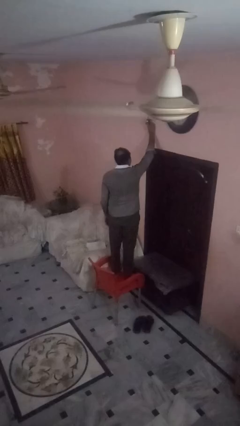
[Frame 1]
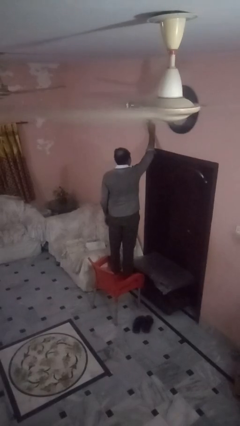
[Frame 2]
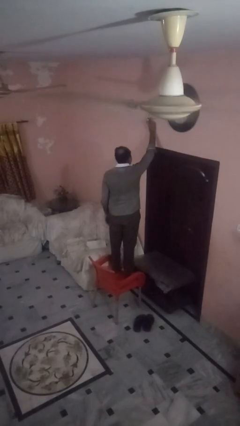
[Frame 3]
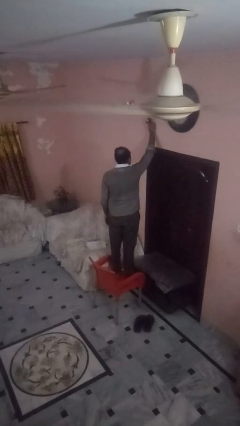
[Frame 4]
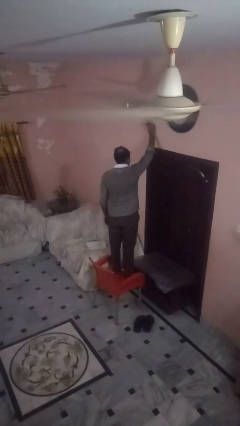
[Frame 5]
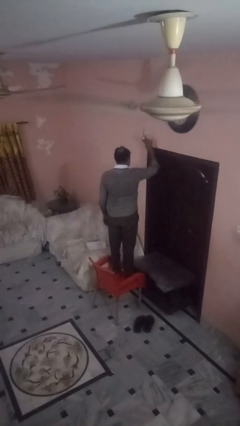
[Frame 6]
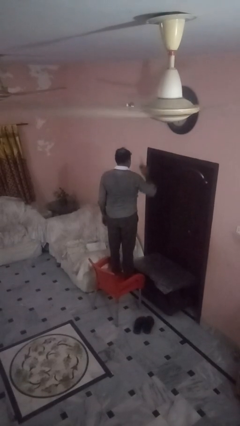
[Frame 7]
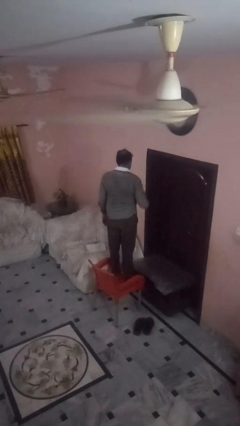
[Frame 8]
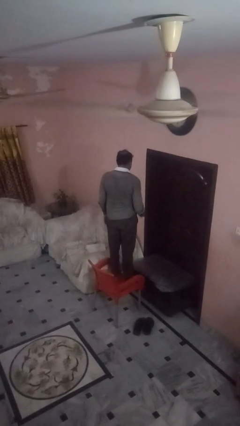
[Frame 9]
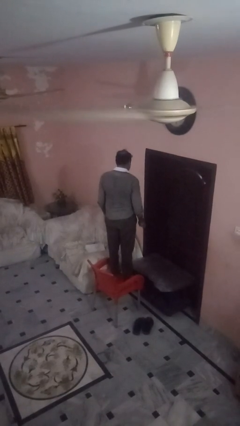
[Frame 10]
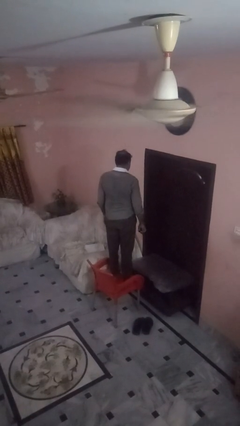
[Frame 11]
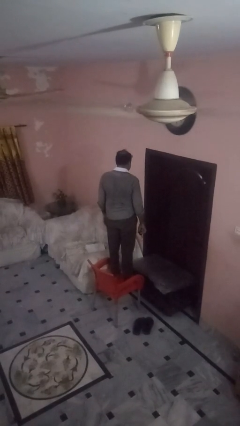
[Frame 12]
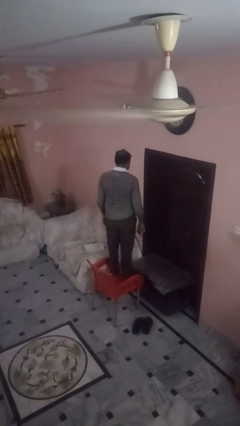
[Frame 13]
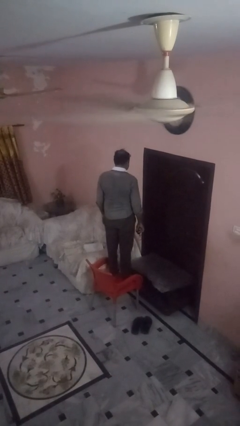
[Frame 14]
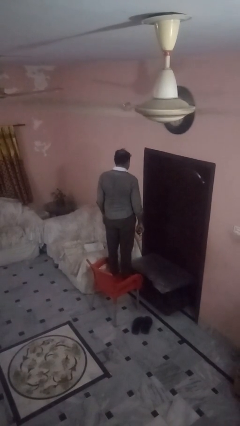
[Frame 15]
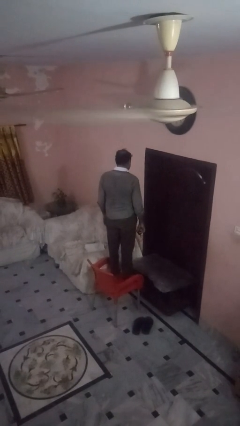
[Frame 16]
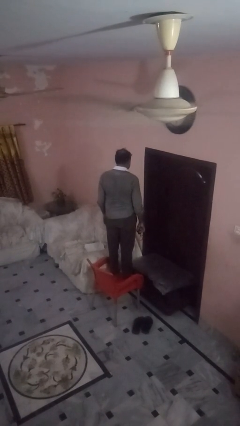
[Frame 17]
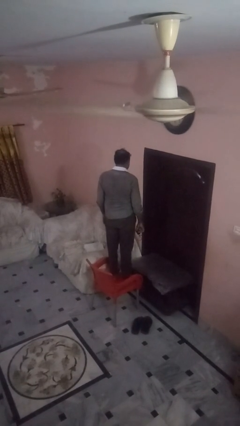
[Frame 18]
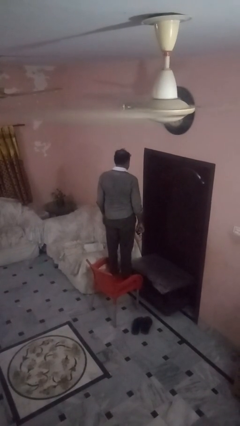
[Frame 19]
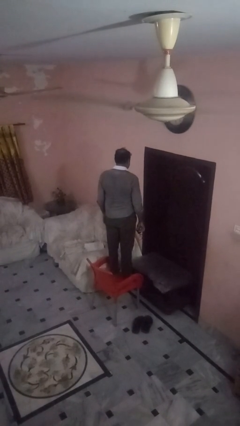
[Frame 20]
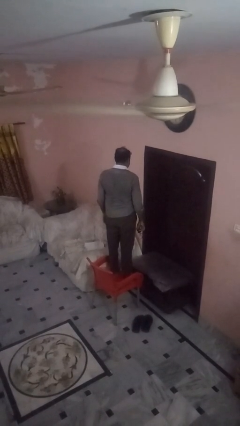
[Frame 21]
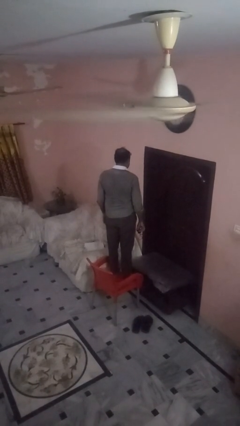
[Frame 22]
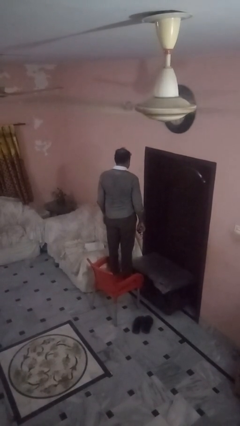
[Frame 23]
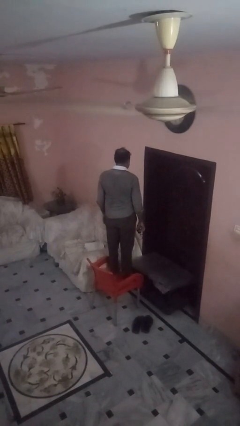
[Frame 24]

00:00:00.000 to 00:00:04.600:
person takes down smoke detector

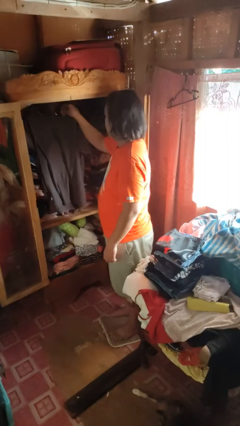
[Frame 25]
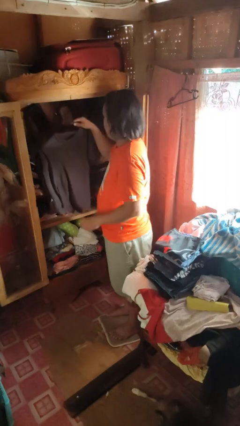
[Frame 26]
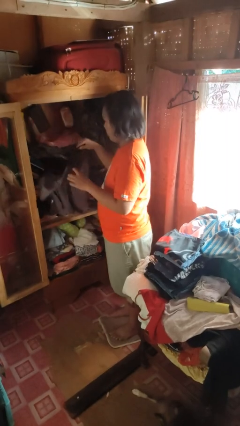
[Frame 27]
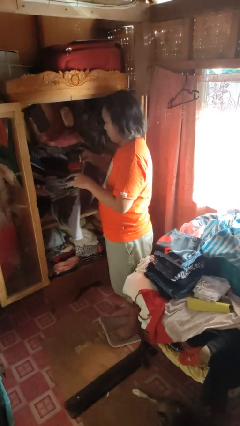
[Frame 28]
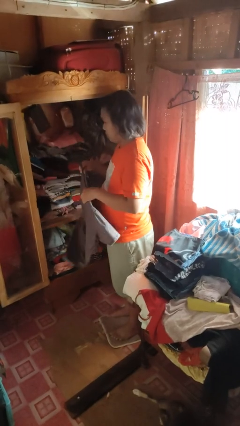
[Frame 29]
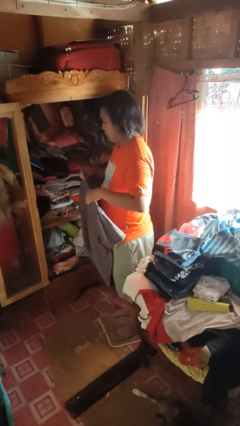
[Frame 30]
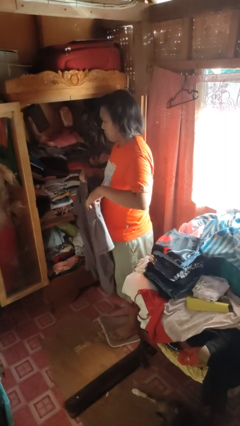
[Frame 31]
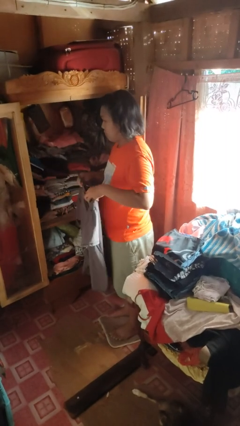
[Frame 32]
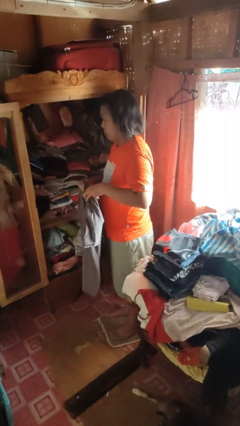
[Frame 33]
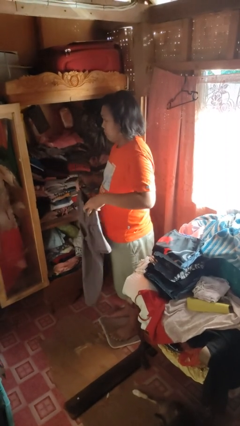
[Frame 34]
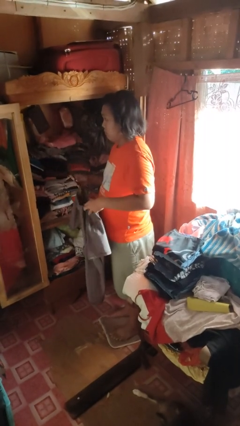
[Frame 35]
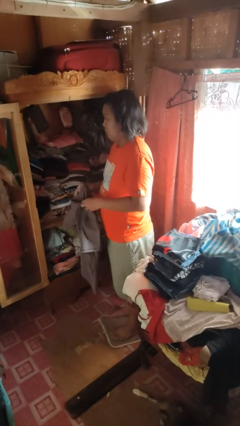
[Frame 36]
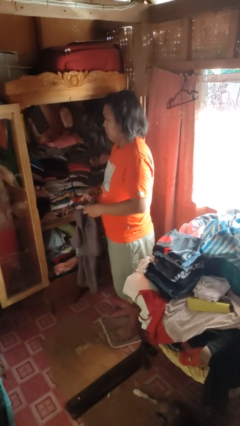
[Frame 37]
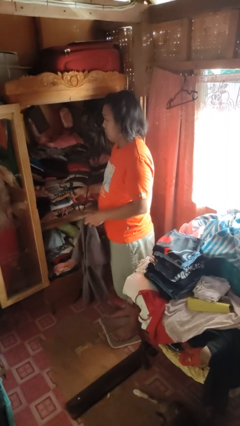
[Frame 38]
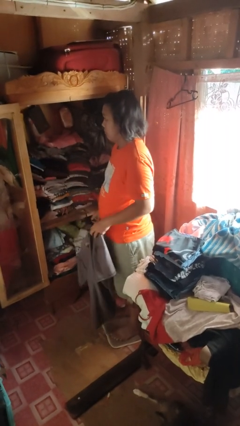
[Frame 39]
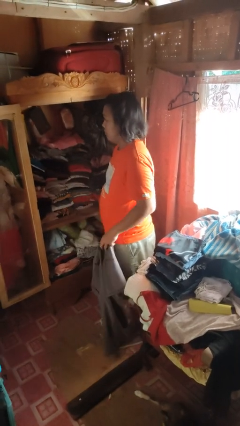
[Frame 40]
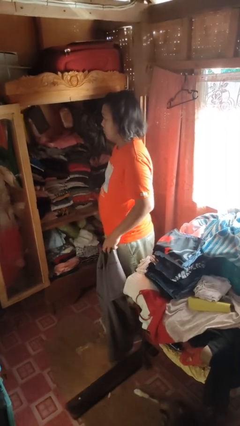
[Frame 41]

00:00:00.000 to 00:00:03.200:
person takes clothes from closet

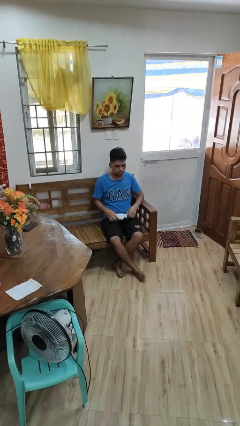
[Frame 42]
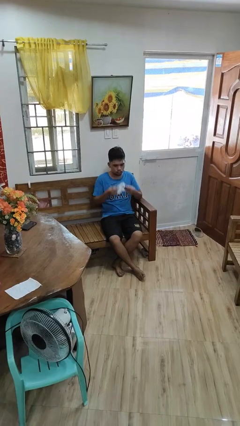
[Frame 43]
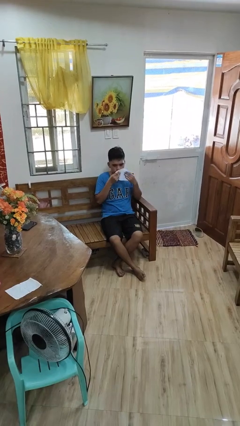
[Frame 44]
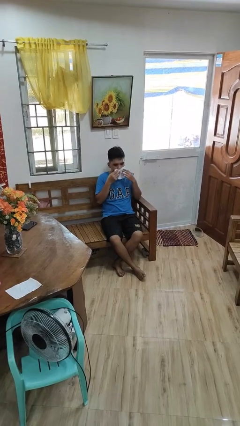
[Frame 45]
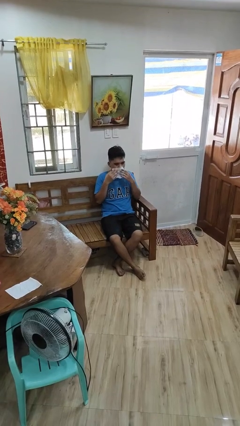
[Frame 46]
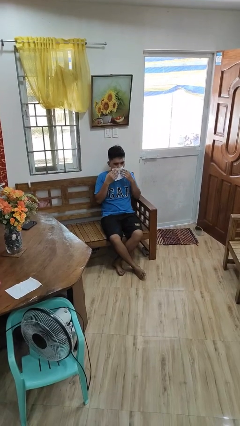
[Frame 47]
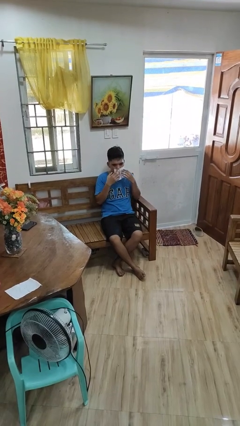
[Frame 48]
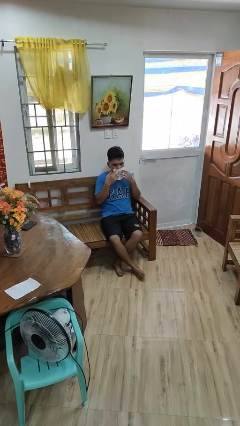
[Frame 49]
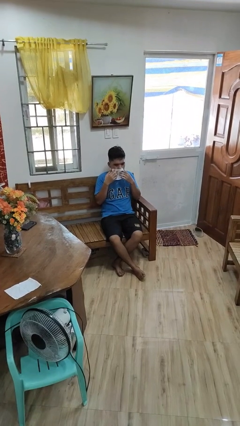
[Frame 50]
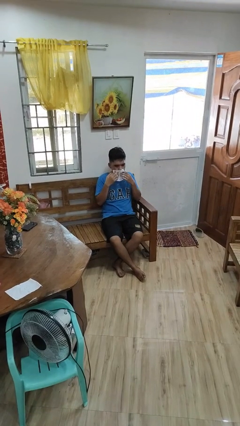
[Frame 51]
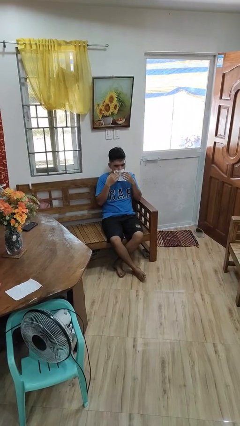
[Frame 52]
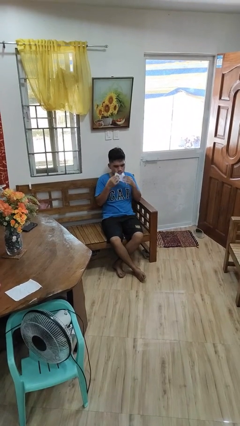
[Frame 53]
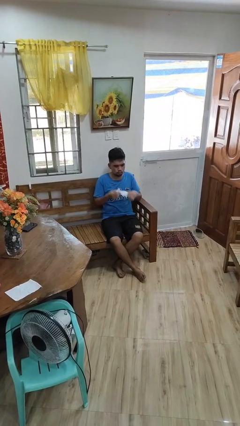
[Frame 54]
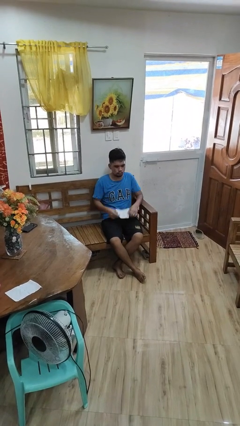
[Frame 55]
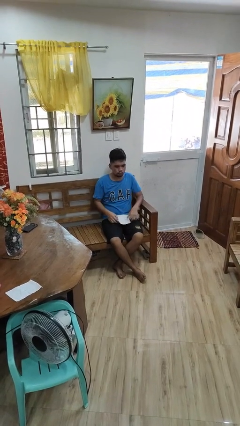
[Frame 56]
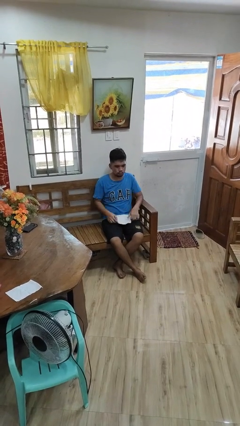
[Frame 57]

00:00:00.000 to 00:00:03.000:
person wipes mouth with napkin

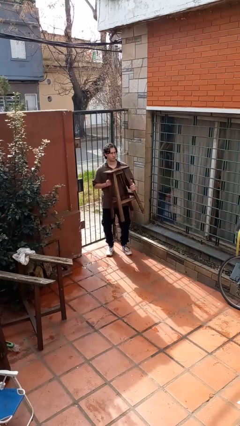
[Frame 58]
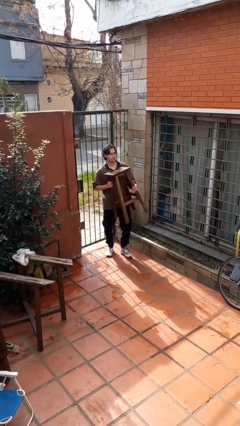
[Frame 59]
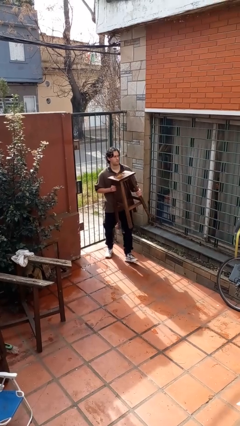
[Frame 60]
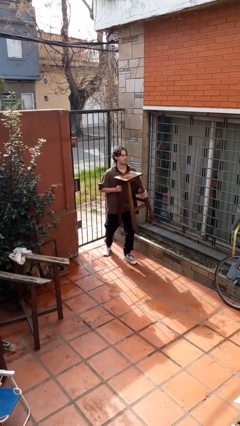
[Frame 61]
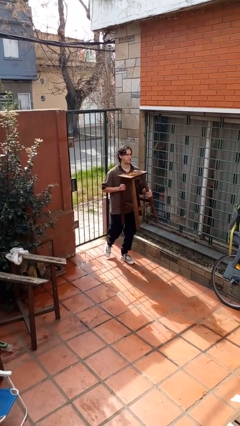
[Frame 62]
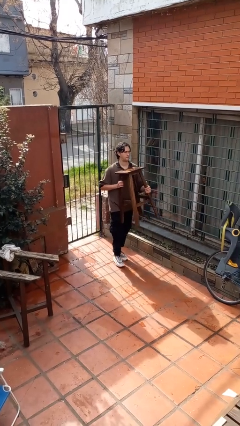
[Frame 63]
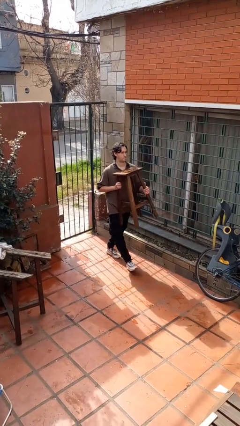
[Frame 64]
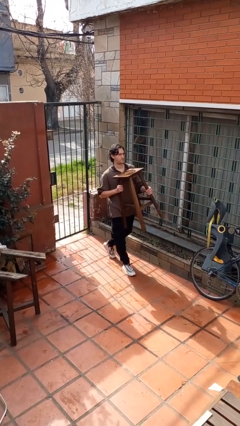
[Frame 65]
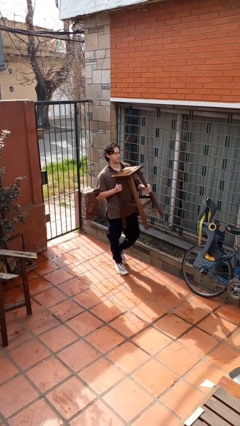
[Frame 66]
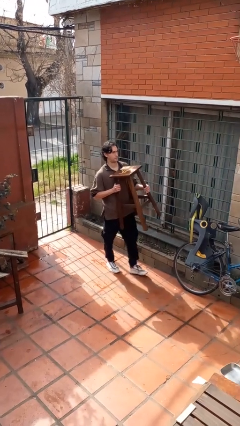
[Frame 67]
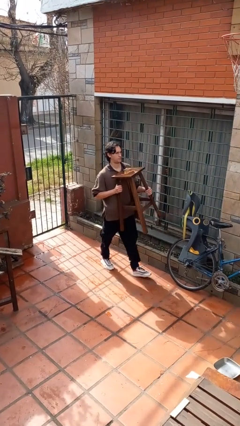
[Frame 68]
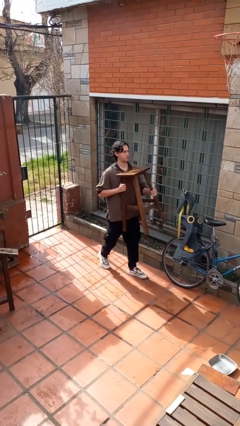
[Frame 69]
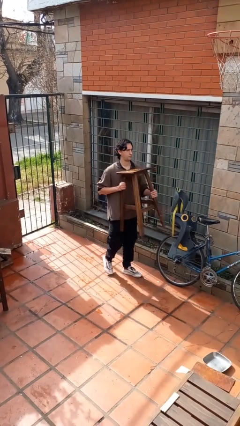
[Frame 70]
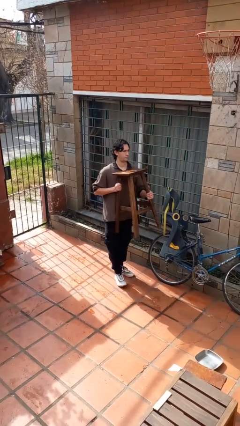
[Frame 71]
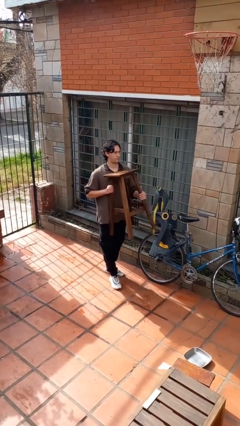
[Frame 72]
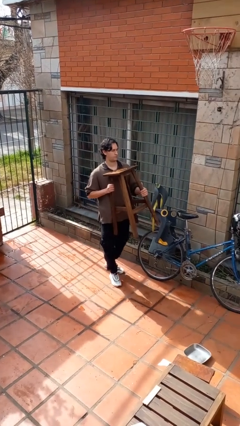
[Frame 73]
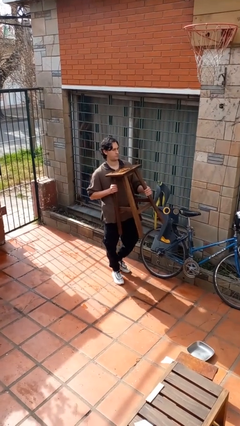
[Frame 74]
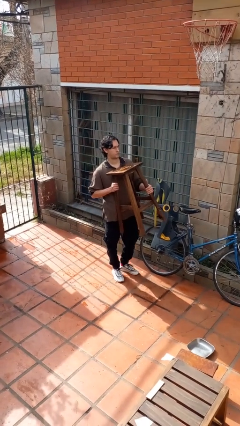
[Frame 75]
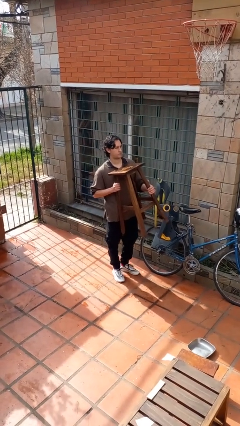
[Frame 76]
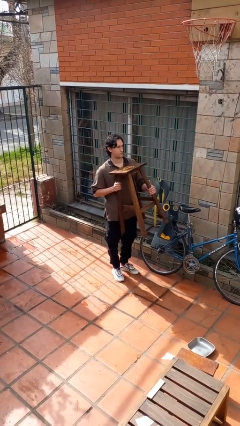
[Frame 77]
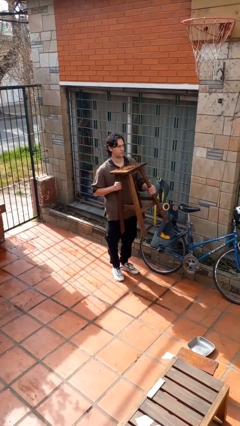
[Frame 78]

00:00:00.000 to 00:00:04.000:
person carries furniture

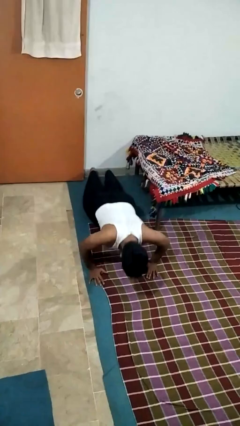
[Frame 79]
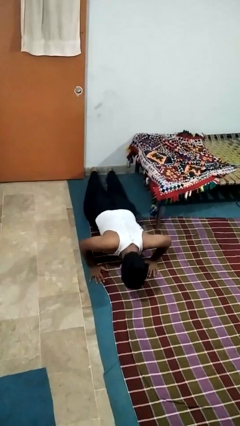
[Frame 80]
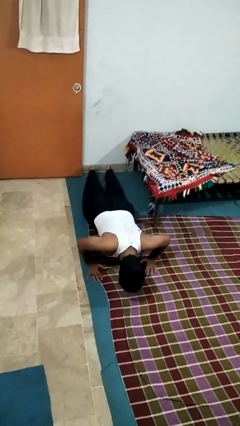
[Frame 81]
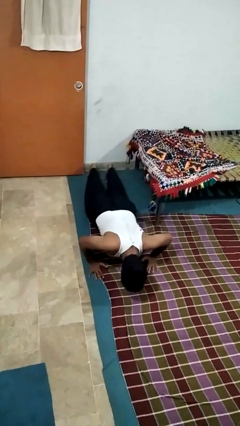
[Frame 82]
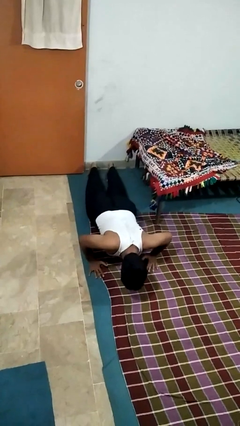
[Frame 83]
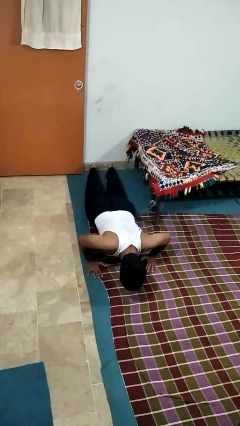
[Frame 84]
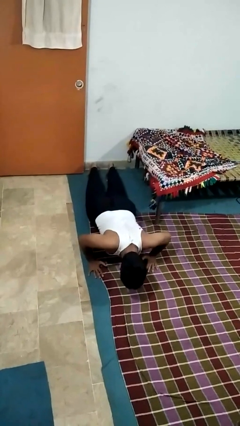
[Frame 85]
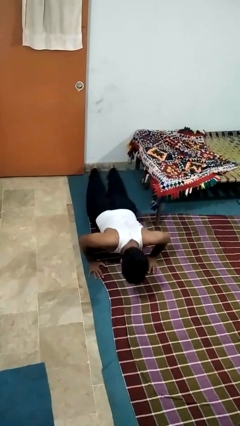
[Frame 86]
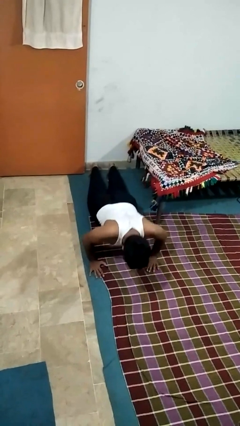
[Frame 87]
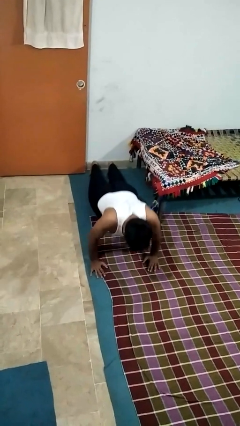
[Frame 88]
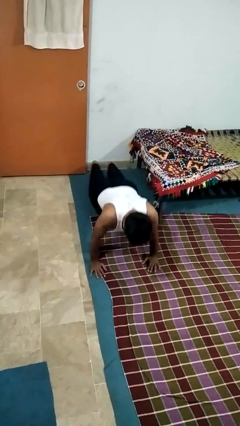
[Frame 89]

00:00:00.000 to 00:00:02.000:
person exercises with pushup

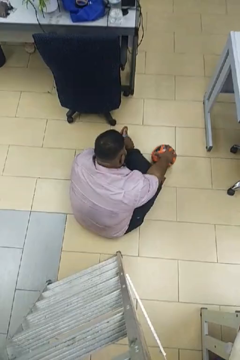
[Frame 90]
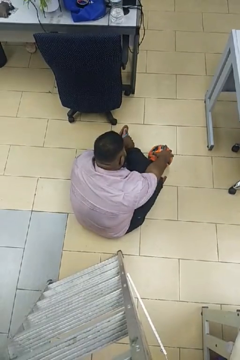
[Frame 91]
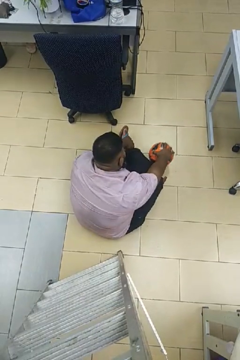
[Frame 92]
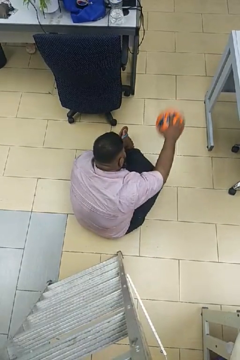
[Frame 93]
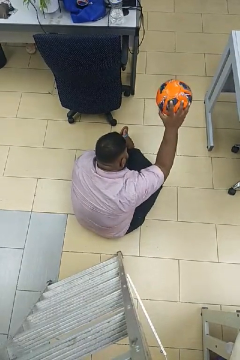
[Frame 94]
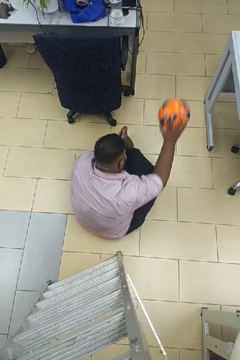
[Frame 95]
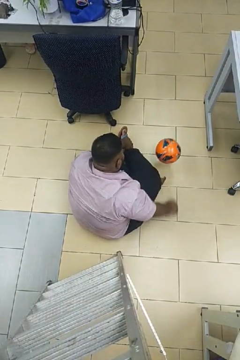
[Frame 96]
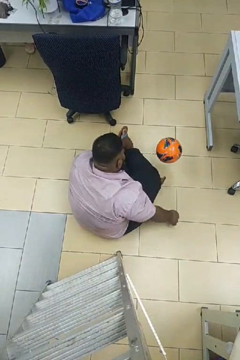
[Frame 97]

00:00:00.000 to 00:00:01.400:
person bounces ball on floor
